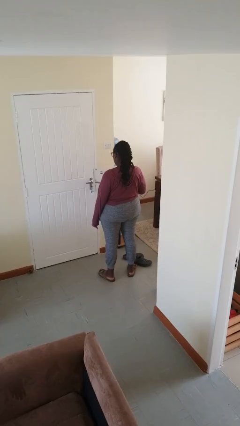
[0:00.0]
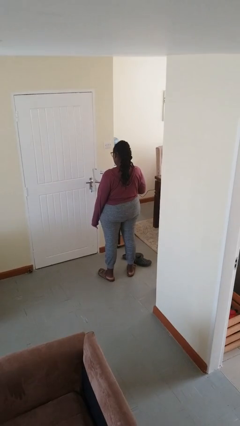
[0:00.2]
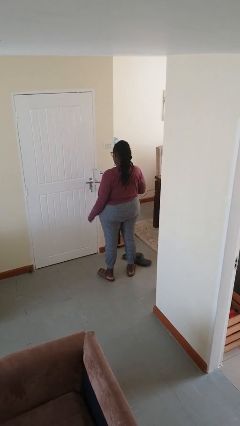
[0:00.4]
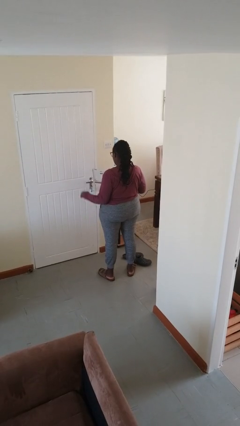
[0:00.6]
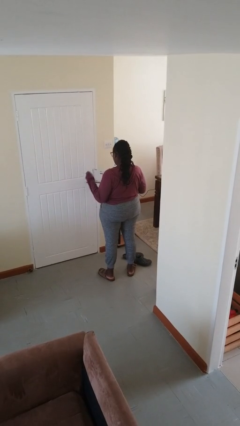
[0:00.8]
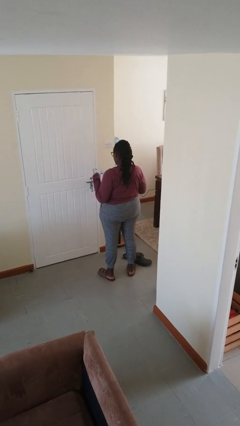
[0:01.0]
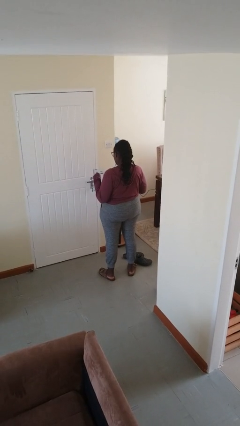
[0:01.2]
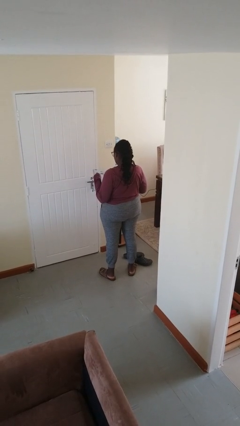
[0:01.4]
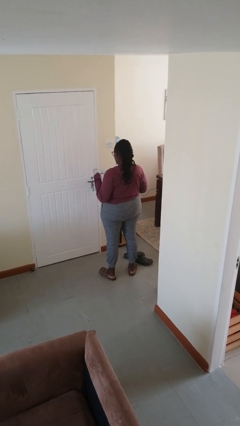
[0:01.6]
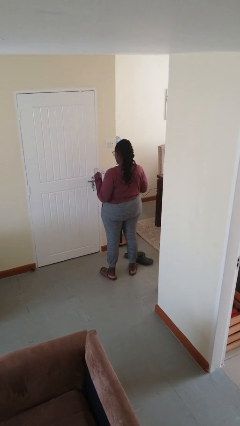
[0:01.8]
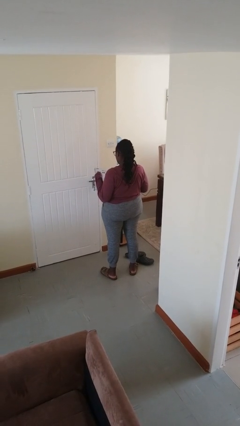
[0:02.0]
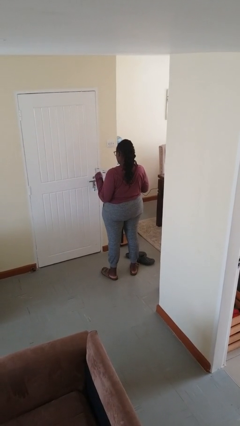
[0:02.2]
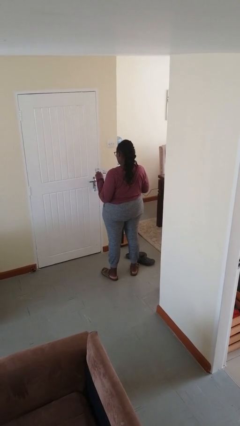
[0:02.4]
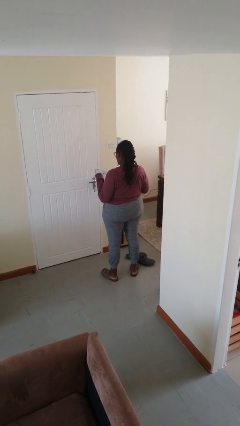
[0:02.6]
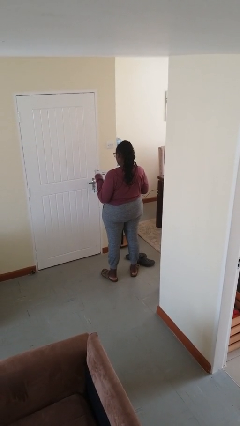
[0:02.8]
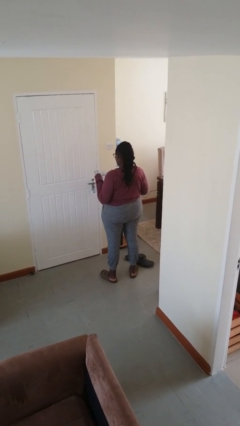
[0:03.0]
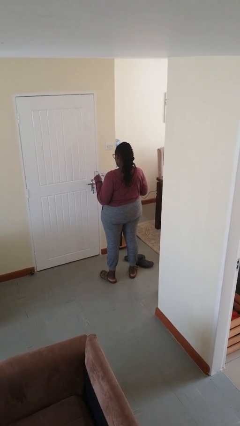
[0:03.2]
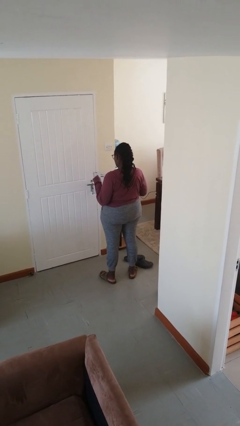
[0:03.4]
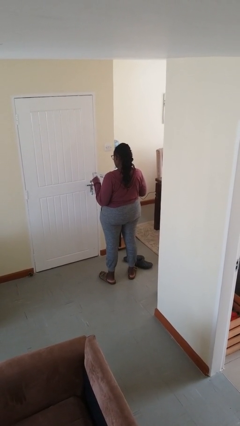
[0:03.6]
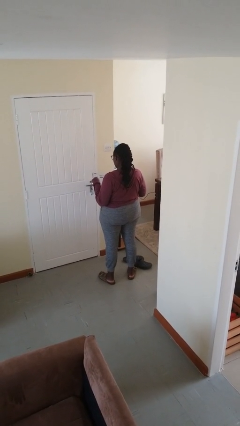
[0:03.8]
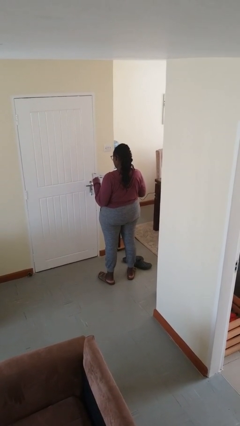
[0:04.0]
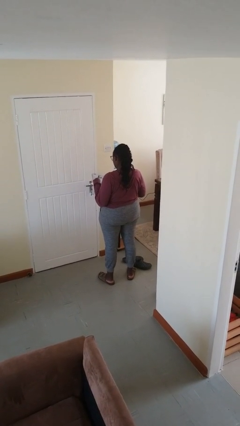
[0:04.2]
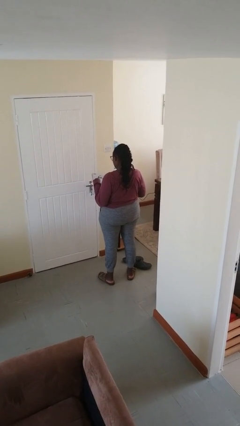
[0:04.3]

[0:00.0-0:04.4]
person taps object with finger

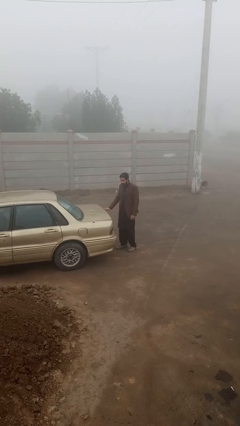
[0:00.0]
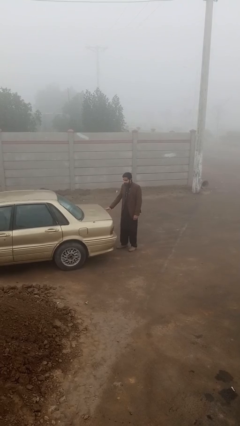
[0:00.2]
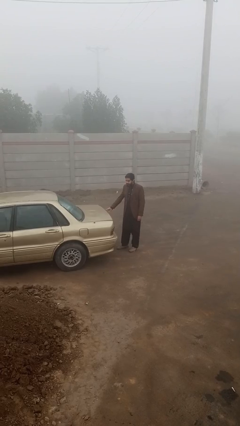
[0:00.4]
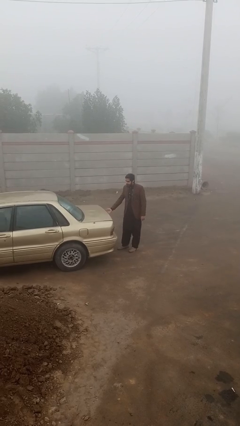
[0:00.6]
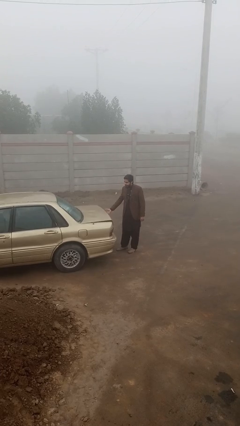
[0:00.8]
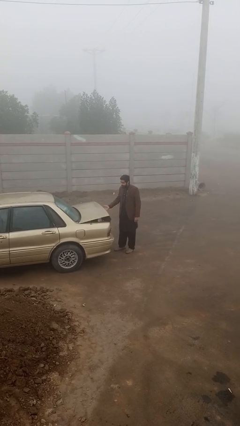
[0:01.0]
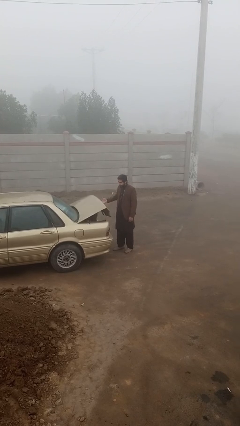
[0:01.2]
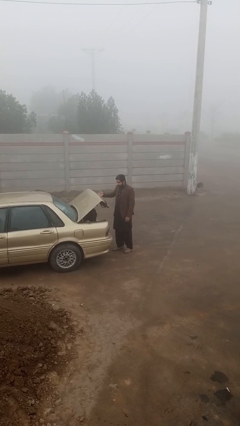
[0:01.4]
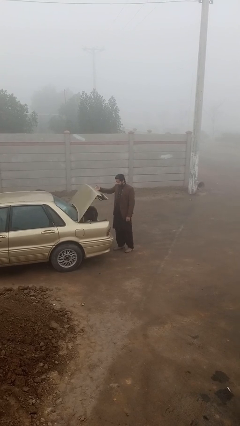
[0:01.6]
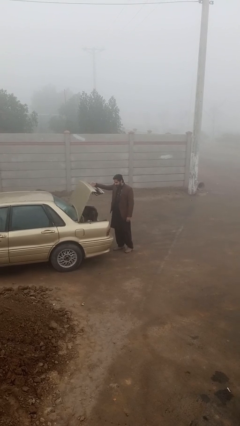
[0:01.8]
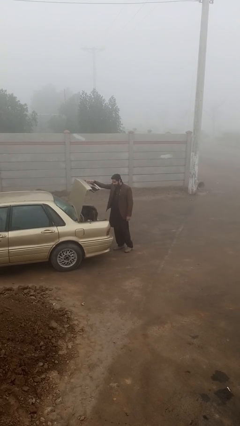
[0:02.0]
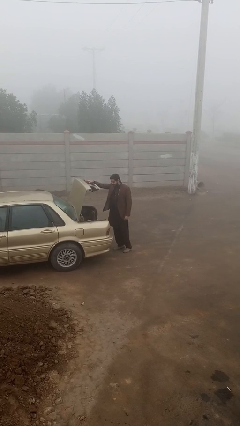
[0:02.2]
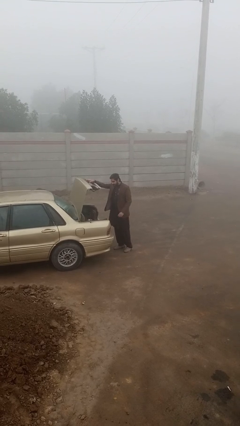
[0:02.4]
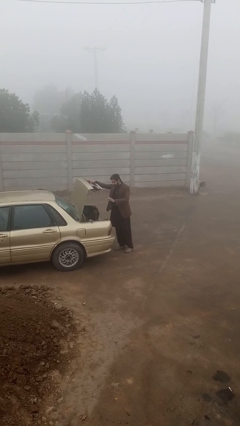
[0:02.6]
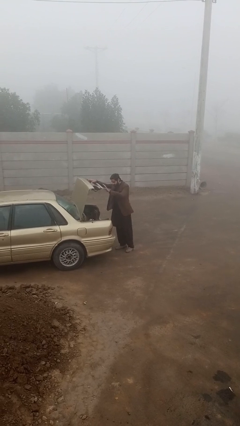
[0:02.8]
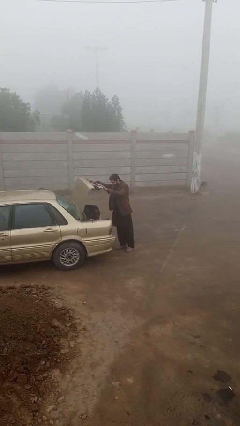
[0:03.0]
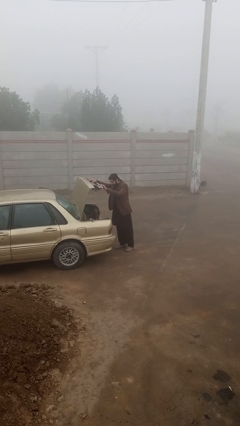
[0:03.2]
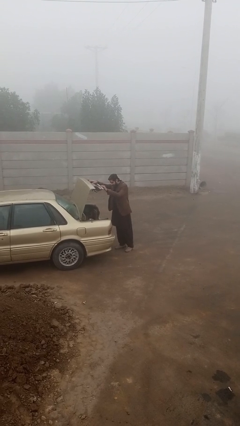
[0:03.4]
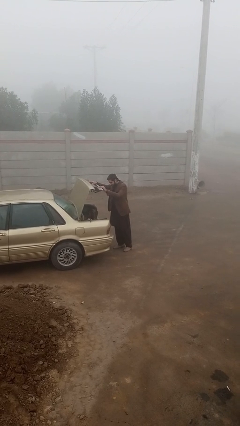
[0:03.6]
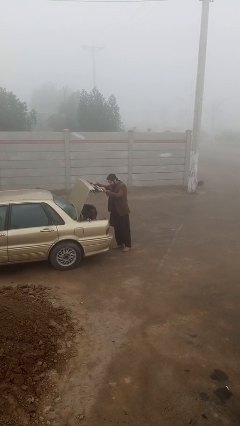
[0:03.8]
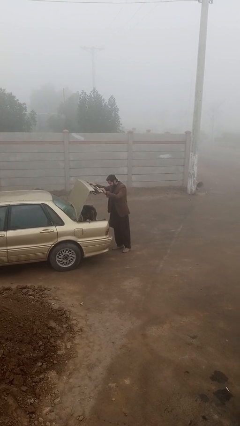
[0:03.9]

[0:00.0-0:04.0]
person opens car trunk

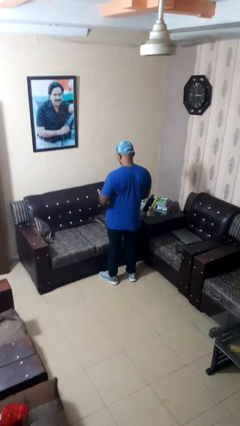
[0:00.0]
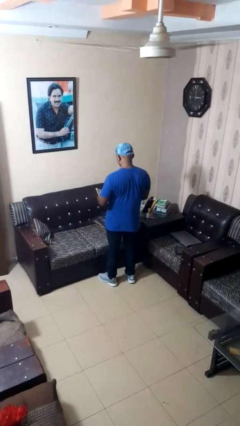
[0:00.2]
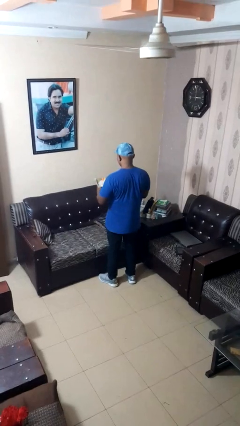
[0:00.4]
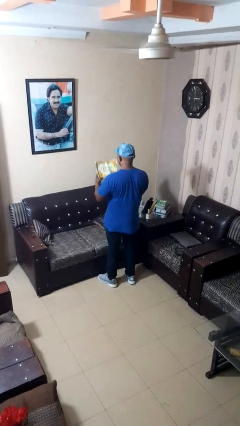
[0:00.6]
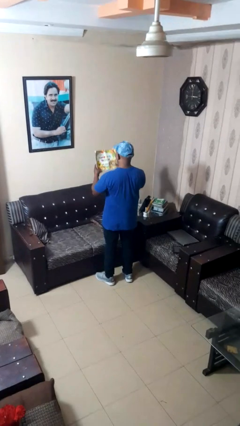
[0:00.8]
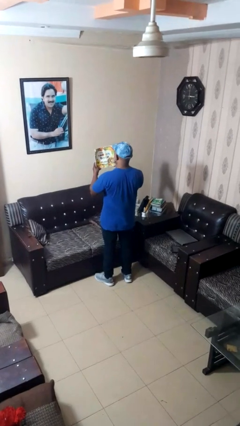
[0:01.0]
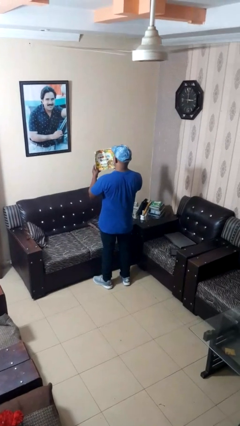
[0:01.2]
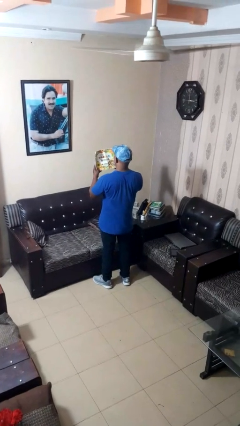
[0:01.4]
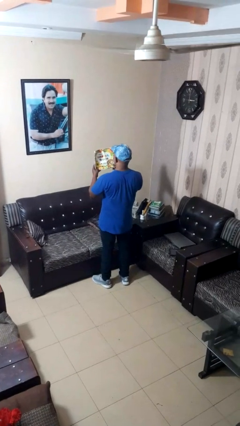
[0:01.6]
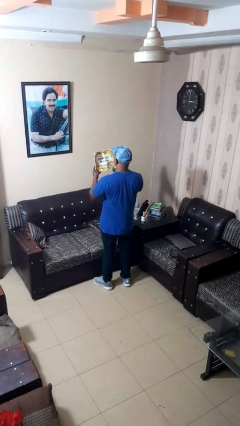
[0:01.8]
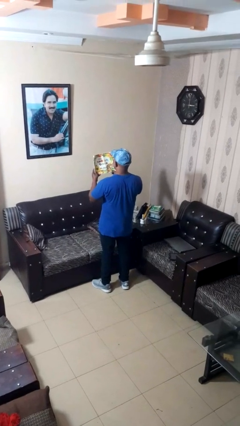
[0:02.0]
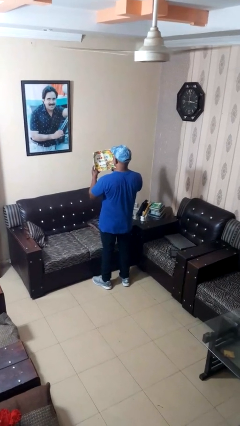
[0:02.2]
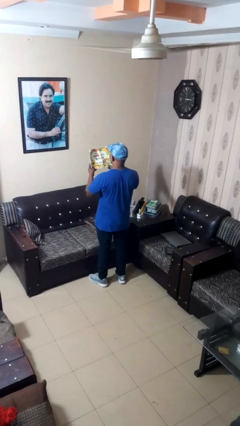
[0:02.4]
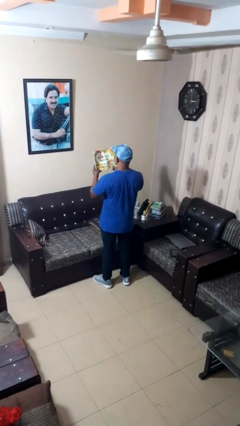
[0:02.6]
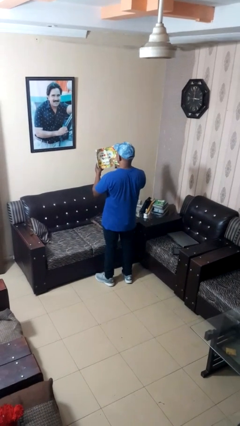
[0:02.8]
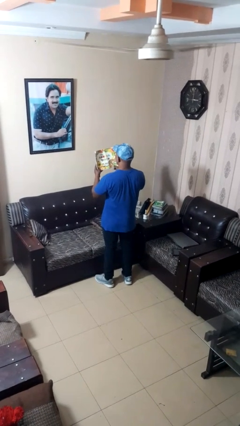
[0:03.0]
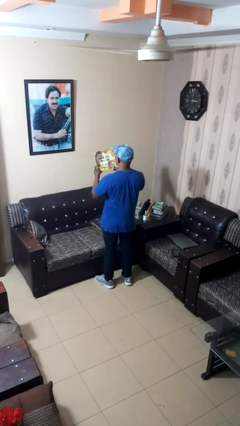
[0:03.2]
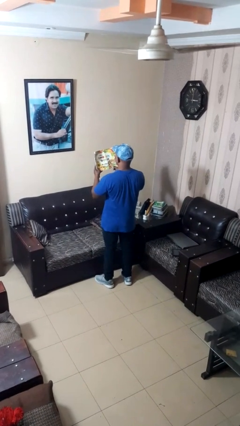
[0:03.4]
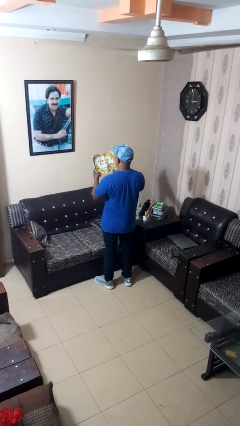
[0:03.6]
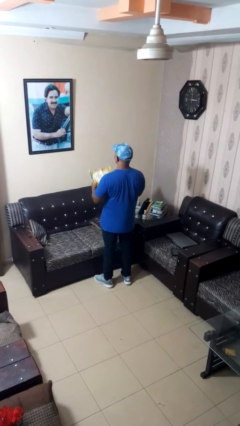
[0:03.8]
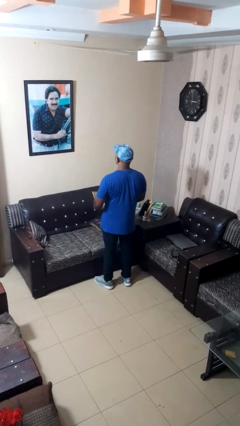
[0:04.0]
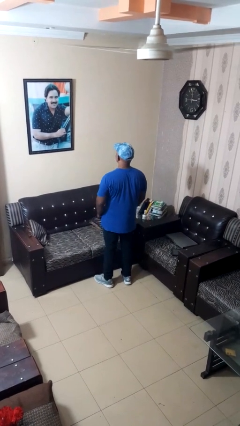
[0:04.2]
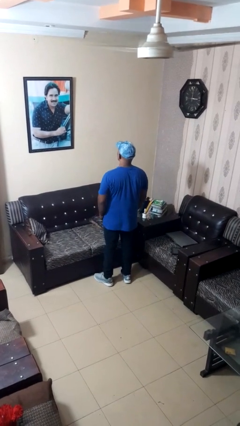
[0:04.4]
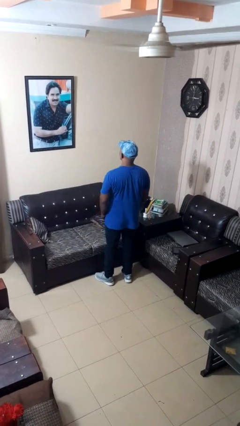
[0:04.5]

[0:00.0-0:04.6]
person reads magazine

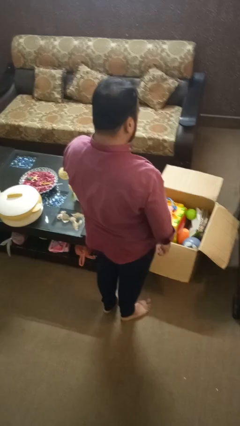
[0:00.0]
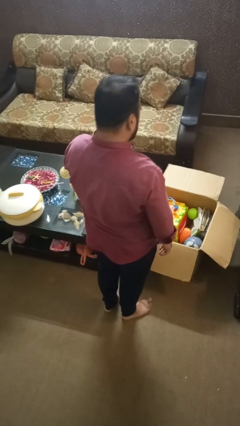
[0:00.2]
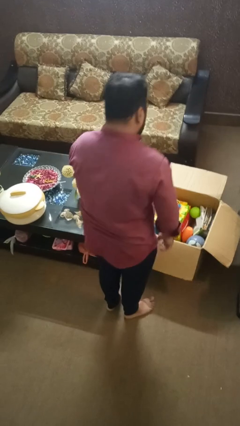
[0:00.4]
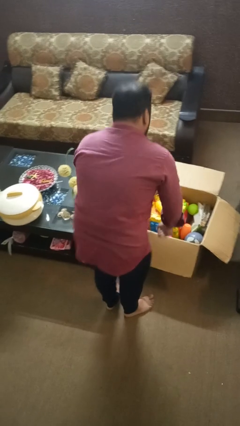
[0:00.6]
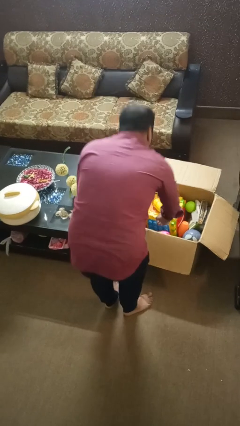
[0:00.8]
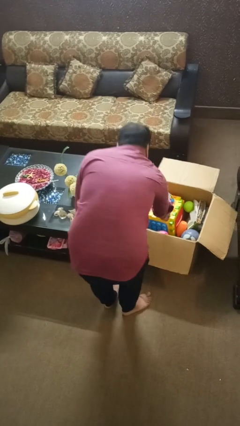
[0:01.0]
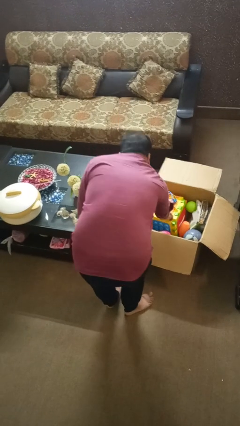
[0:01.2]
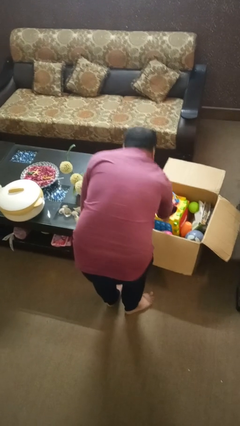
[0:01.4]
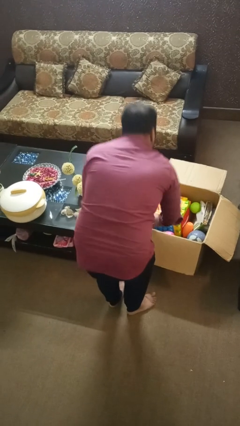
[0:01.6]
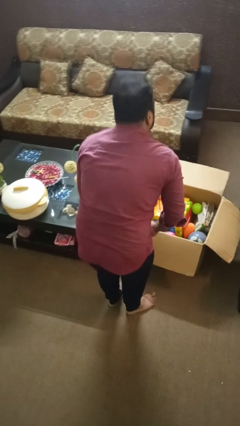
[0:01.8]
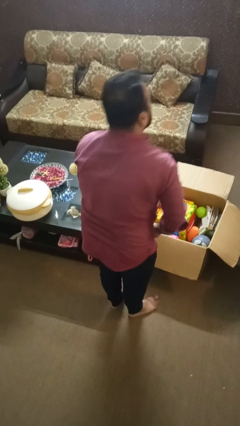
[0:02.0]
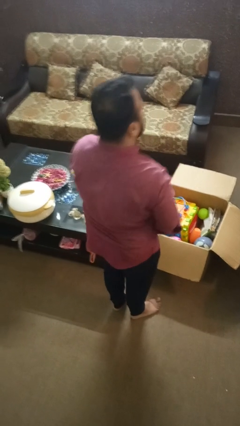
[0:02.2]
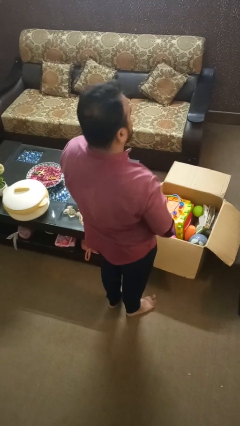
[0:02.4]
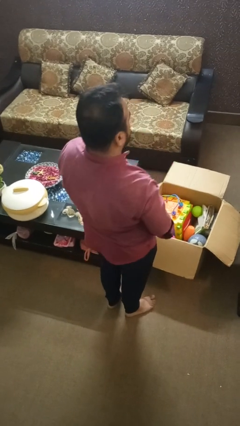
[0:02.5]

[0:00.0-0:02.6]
person takes object from box

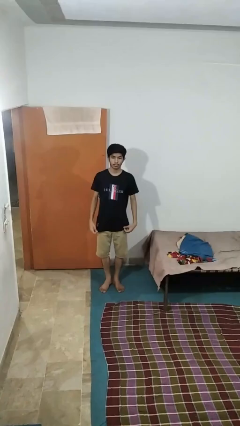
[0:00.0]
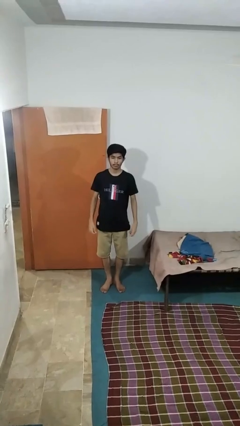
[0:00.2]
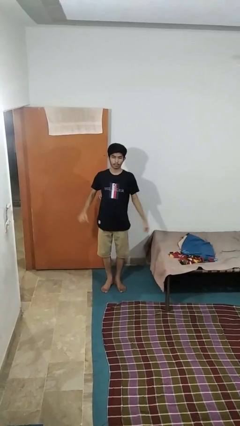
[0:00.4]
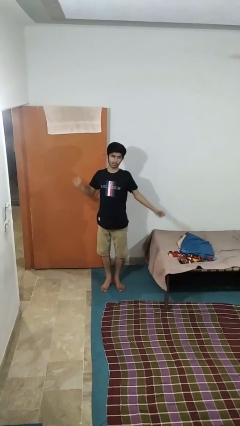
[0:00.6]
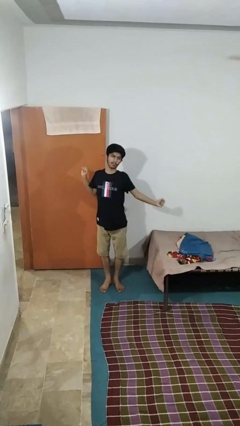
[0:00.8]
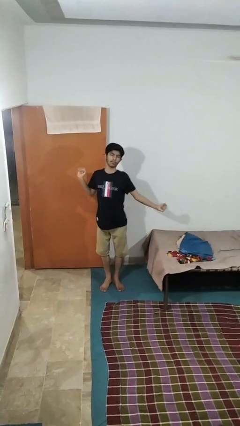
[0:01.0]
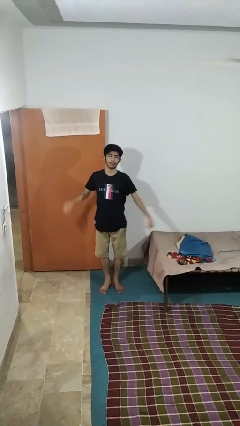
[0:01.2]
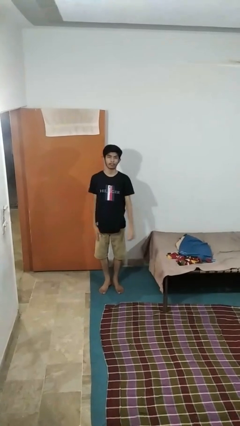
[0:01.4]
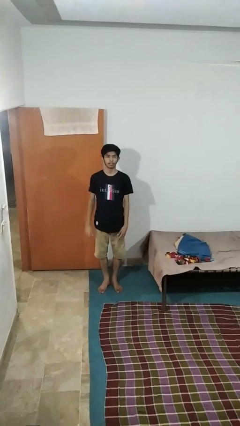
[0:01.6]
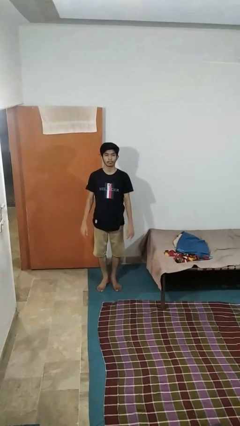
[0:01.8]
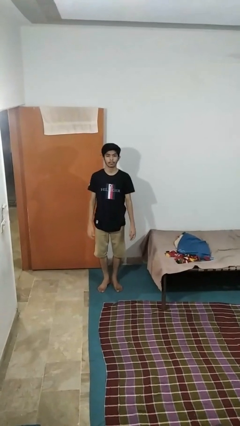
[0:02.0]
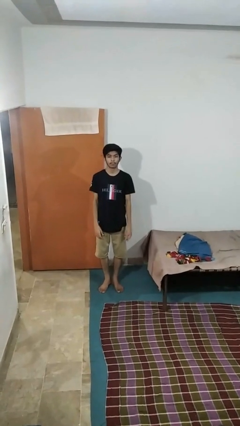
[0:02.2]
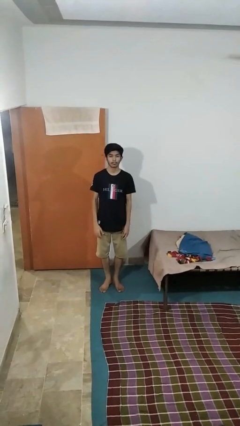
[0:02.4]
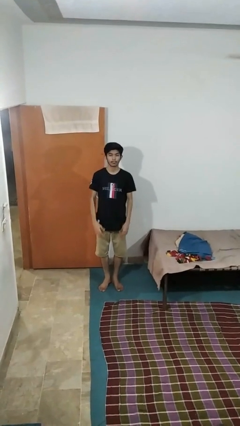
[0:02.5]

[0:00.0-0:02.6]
person stretches arms to side
